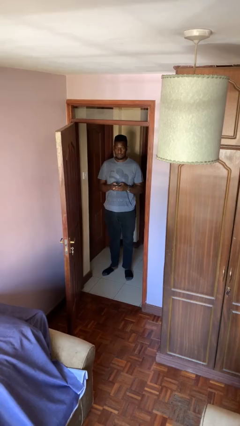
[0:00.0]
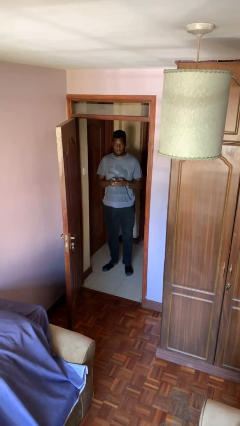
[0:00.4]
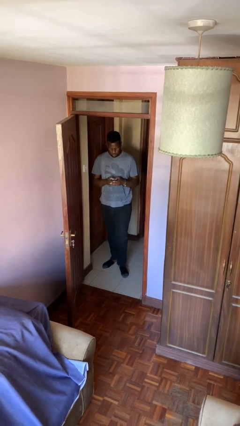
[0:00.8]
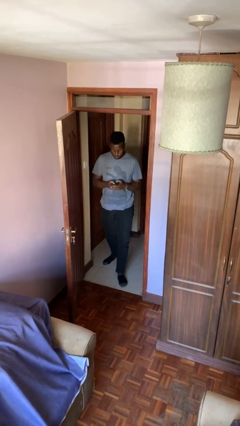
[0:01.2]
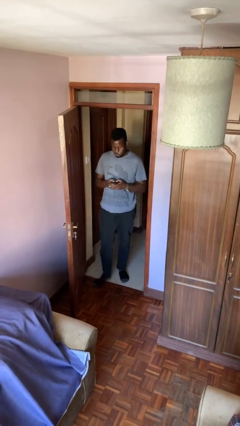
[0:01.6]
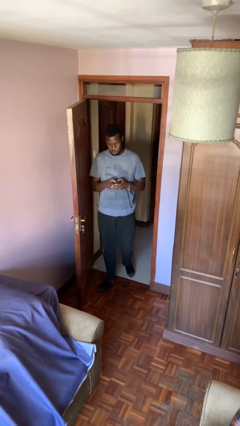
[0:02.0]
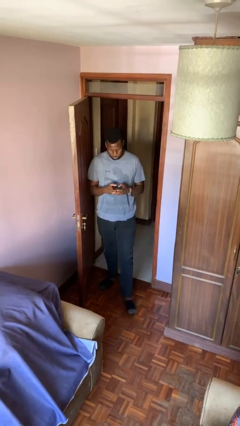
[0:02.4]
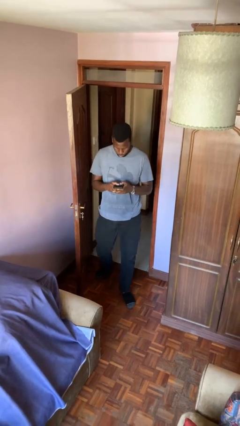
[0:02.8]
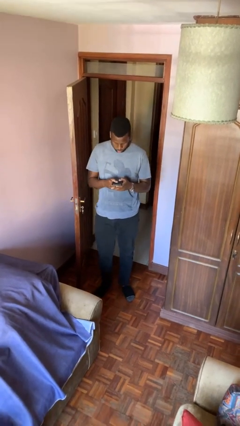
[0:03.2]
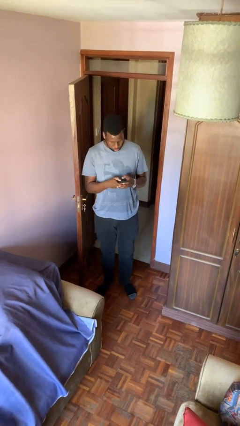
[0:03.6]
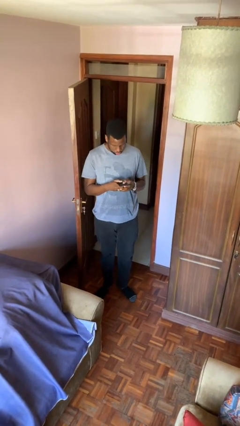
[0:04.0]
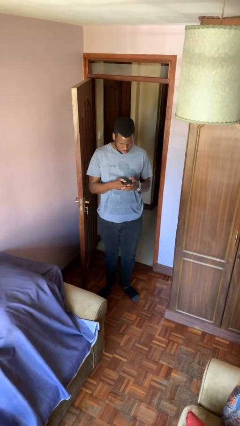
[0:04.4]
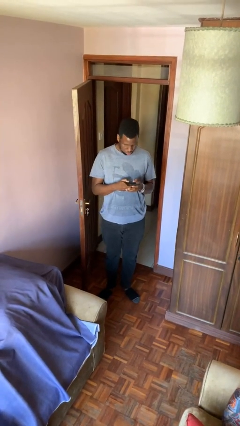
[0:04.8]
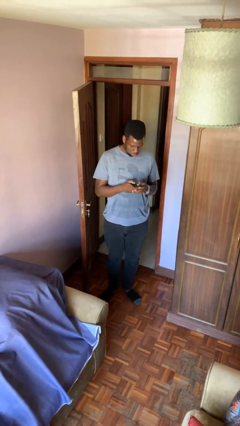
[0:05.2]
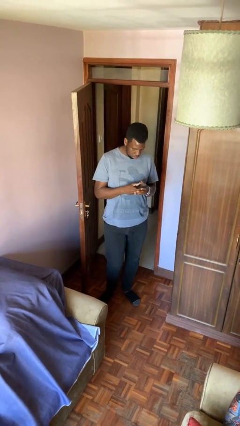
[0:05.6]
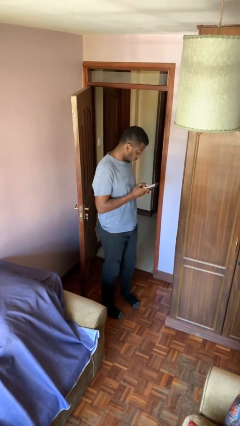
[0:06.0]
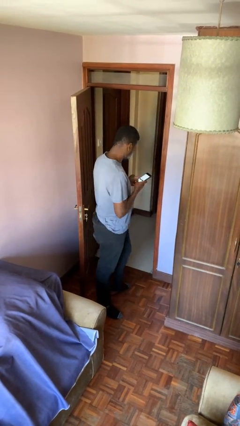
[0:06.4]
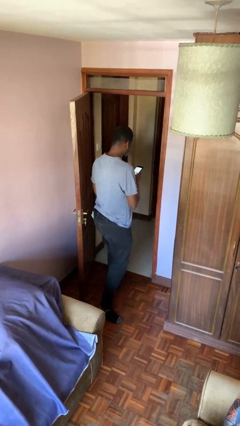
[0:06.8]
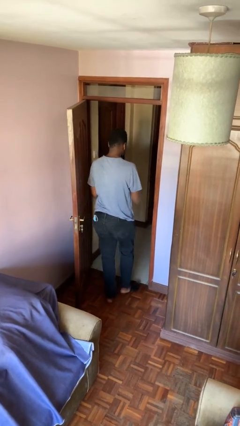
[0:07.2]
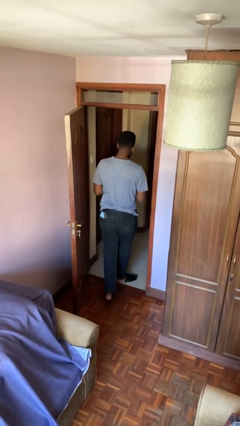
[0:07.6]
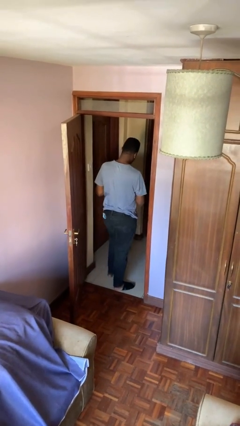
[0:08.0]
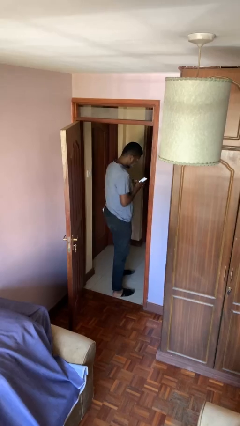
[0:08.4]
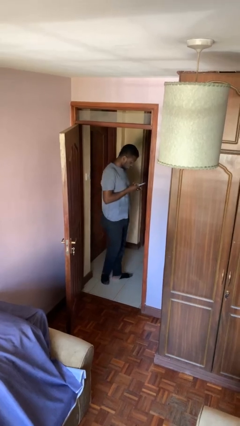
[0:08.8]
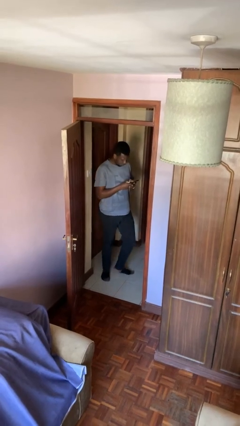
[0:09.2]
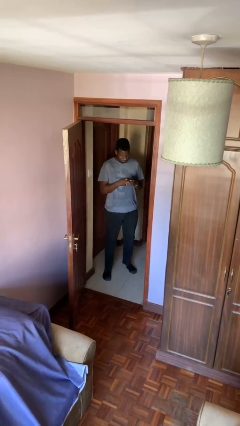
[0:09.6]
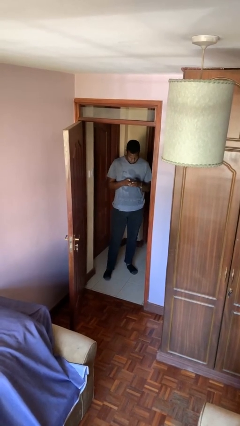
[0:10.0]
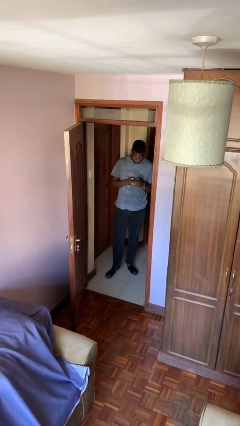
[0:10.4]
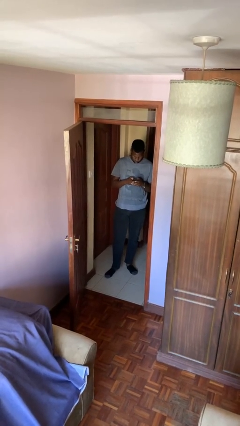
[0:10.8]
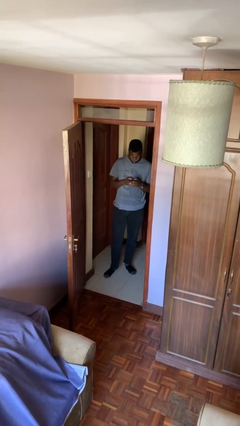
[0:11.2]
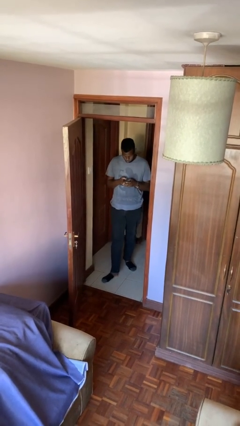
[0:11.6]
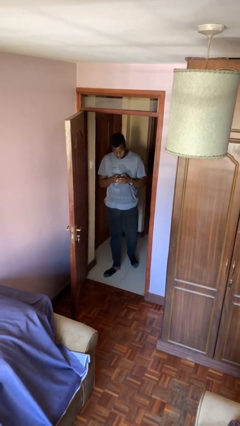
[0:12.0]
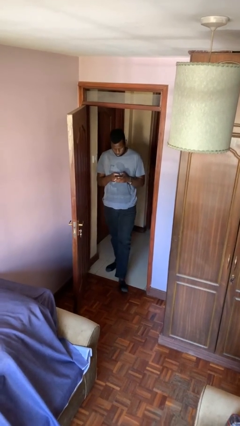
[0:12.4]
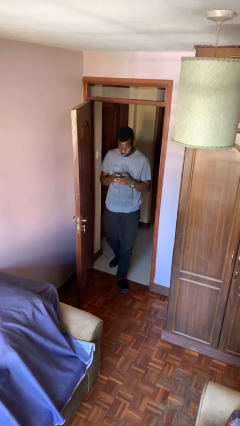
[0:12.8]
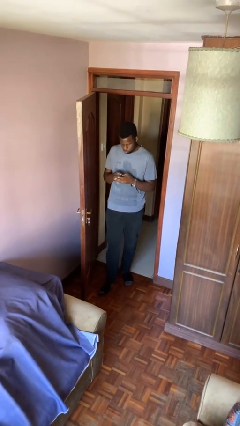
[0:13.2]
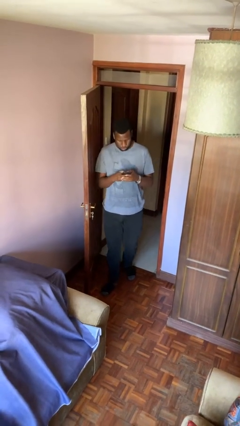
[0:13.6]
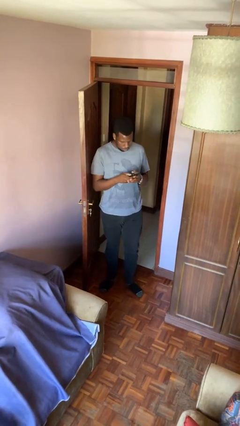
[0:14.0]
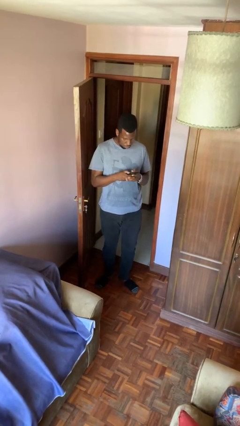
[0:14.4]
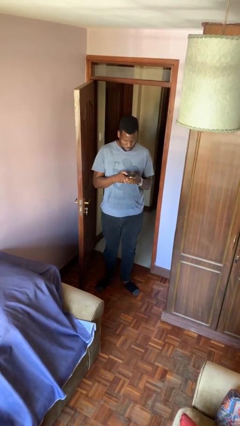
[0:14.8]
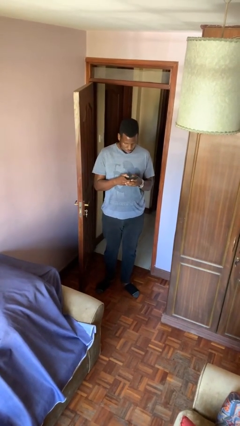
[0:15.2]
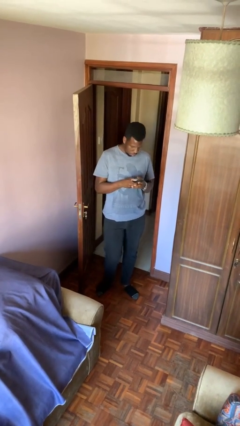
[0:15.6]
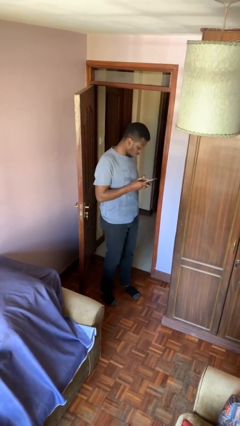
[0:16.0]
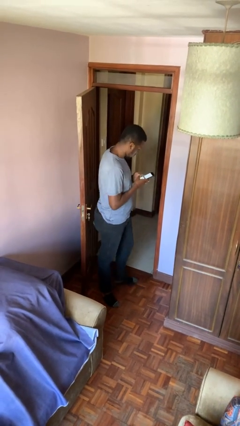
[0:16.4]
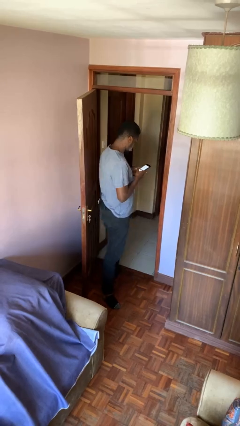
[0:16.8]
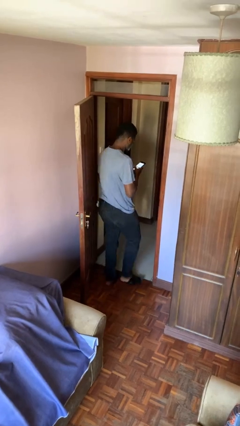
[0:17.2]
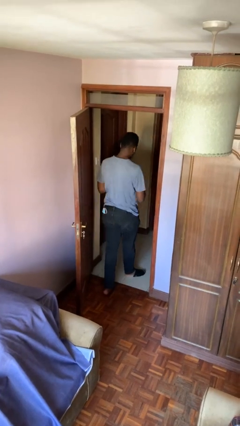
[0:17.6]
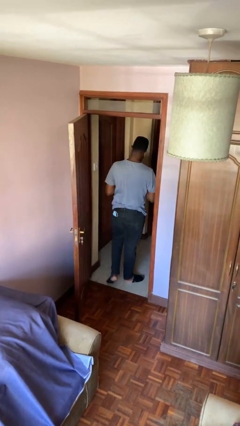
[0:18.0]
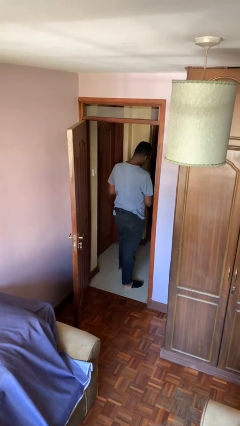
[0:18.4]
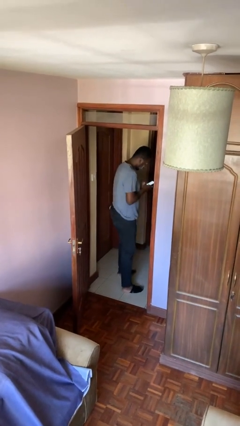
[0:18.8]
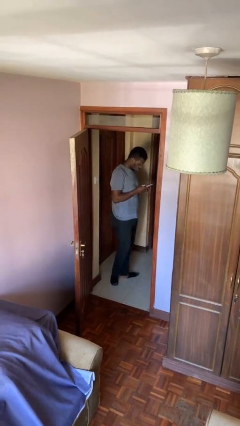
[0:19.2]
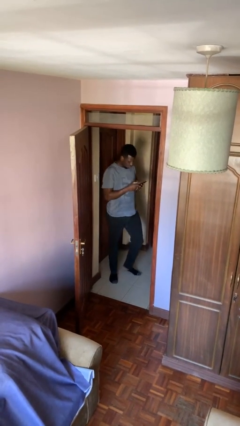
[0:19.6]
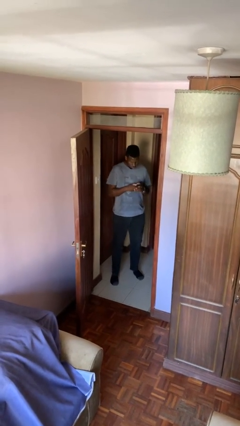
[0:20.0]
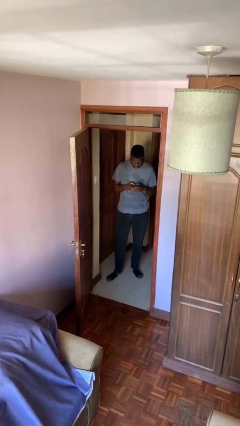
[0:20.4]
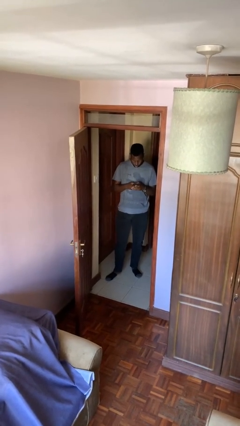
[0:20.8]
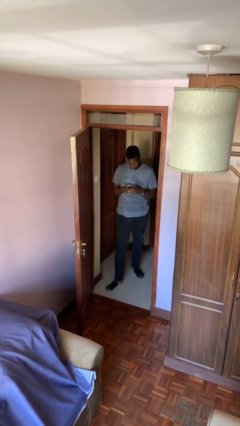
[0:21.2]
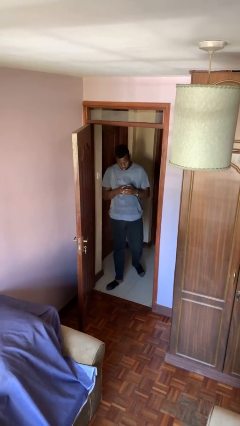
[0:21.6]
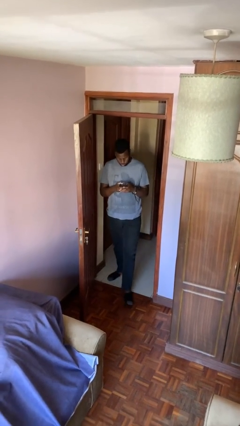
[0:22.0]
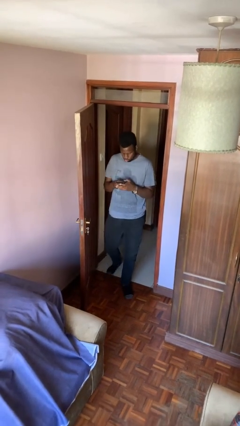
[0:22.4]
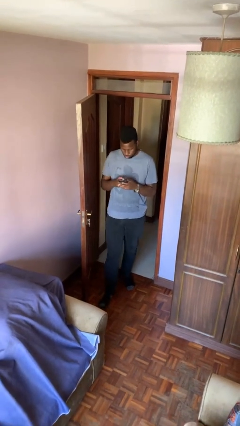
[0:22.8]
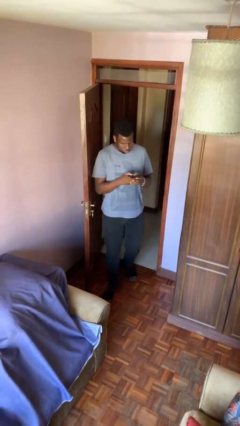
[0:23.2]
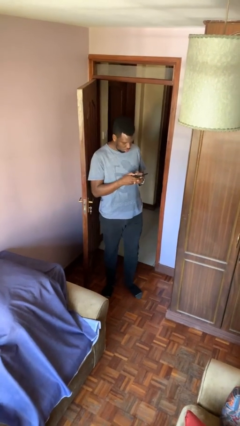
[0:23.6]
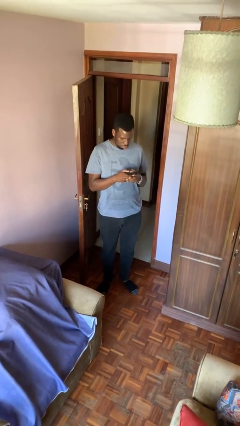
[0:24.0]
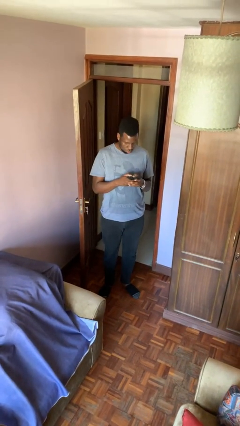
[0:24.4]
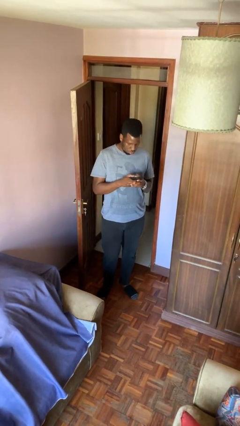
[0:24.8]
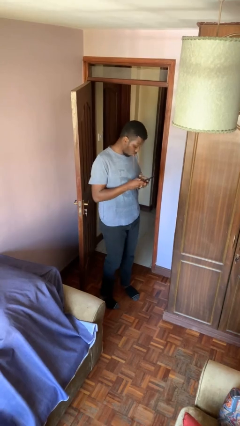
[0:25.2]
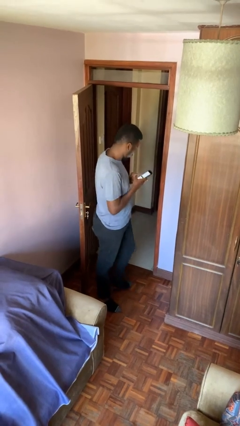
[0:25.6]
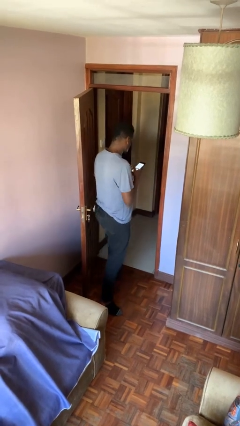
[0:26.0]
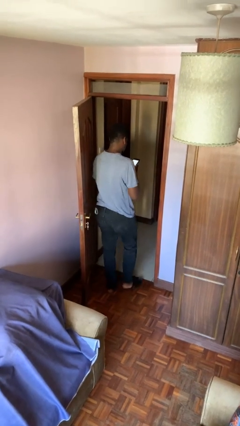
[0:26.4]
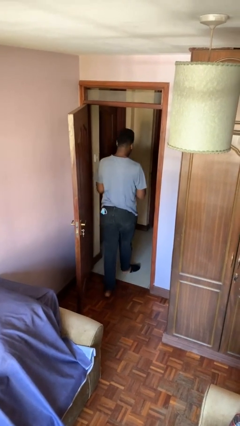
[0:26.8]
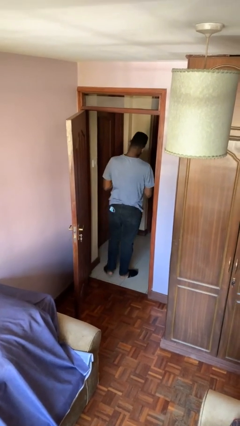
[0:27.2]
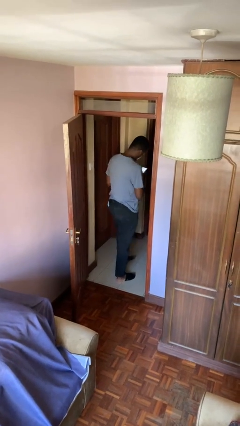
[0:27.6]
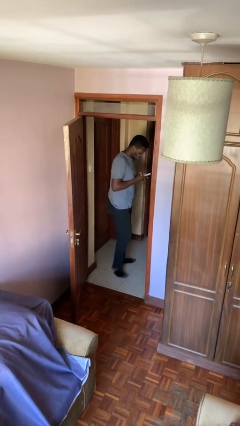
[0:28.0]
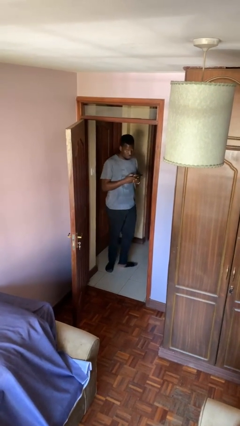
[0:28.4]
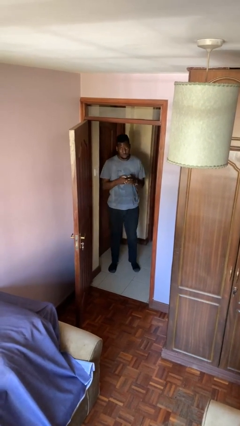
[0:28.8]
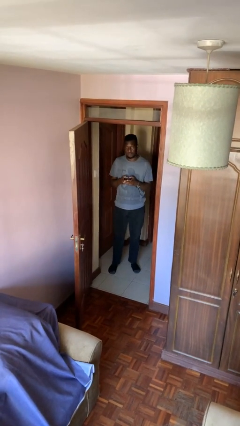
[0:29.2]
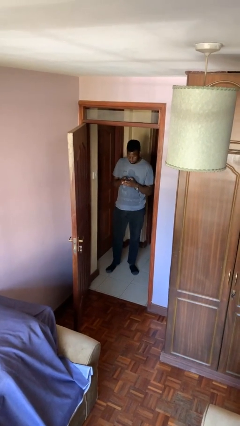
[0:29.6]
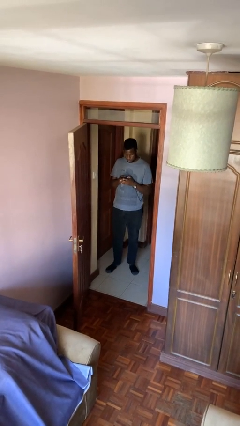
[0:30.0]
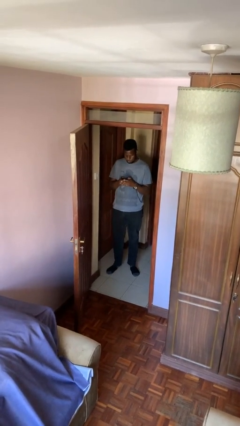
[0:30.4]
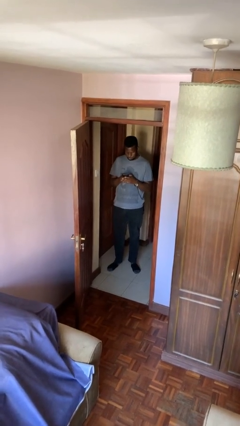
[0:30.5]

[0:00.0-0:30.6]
person texts on phone

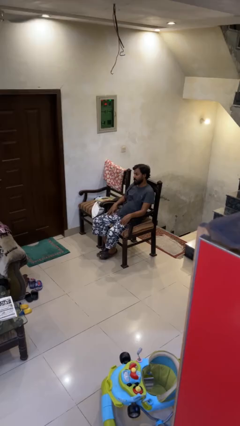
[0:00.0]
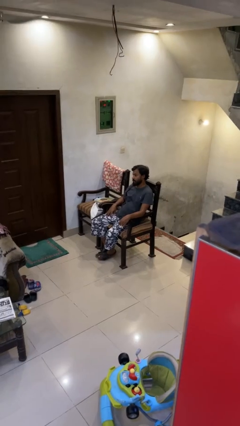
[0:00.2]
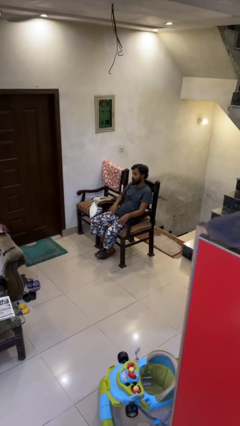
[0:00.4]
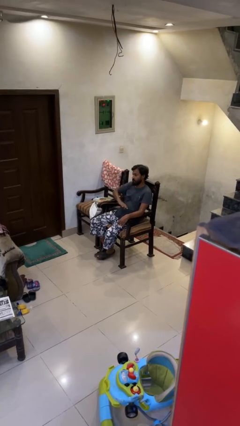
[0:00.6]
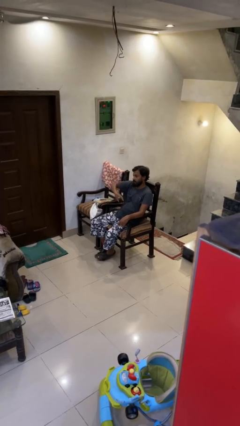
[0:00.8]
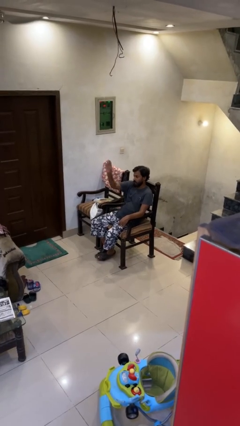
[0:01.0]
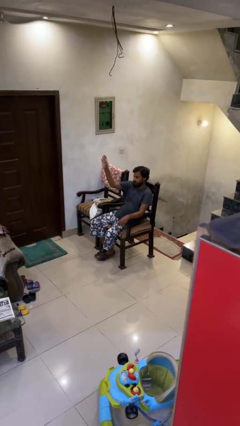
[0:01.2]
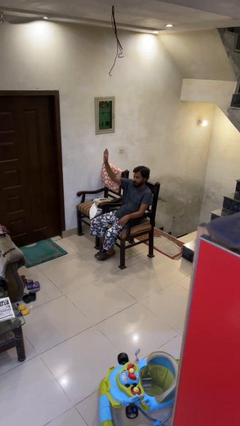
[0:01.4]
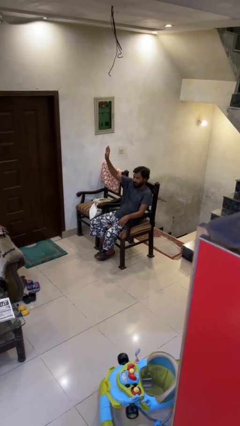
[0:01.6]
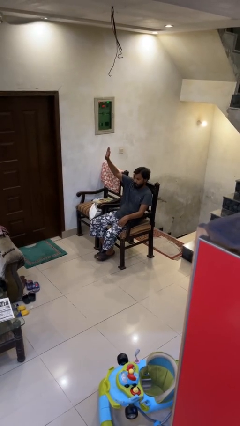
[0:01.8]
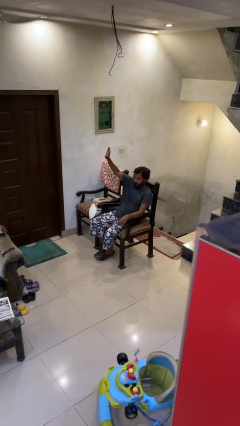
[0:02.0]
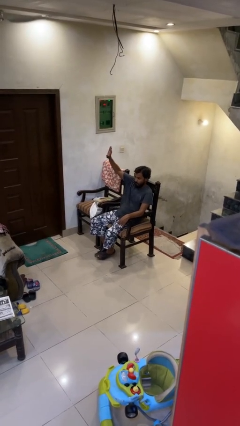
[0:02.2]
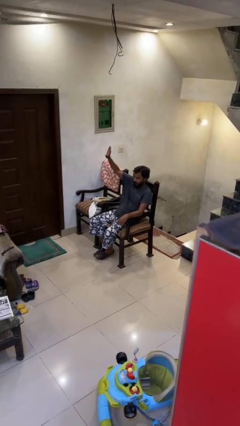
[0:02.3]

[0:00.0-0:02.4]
person gestures swipe up

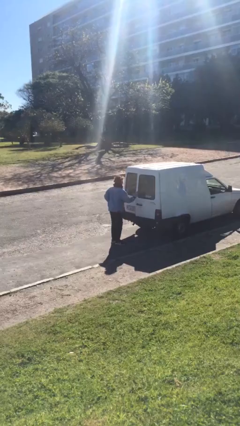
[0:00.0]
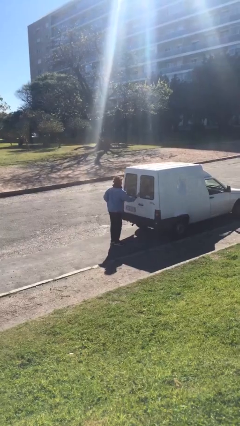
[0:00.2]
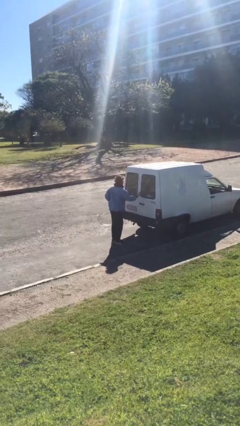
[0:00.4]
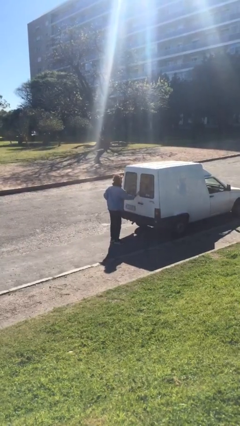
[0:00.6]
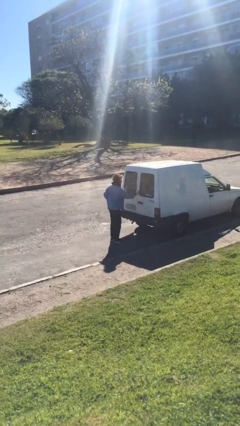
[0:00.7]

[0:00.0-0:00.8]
person closes car door
